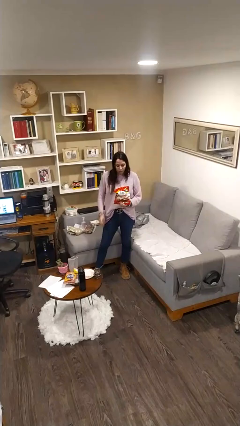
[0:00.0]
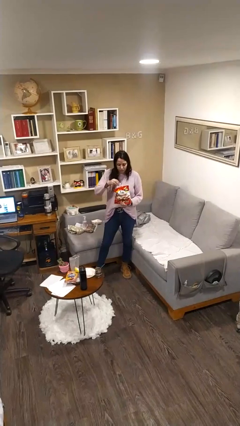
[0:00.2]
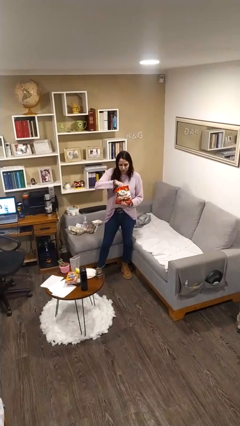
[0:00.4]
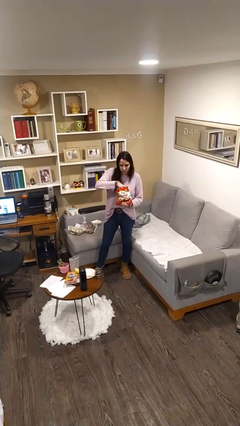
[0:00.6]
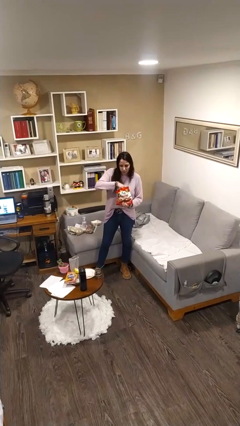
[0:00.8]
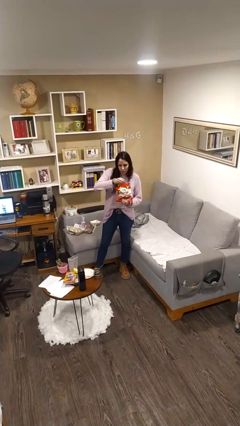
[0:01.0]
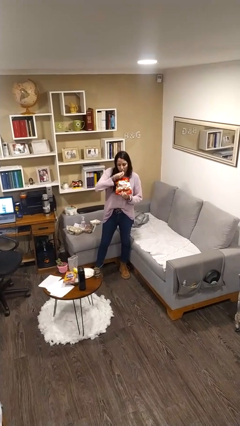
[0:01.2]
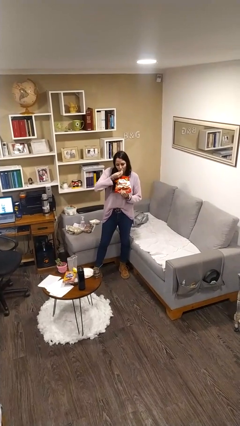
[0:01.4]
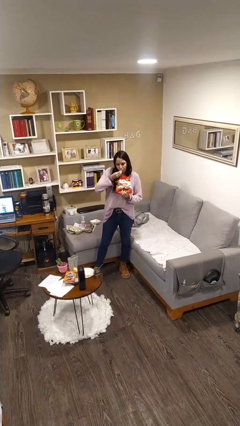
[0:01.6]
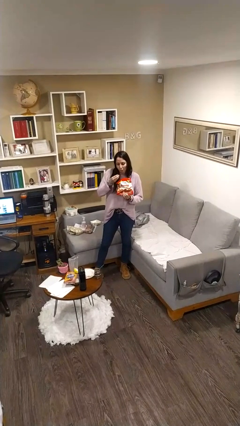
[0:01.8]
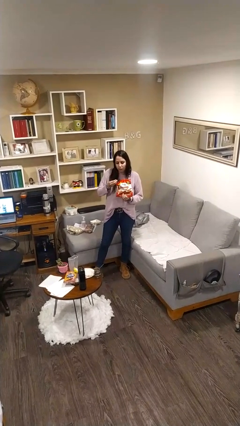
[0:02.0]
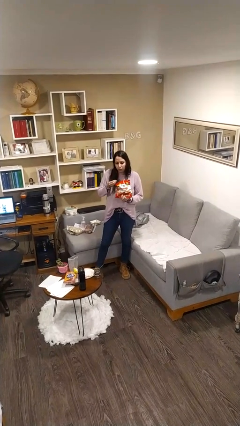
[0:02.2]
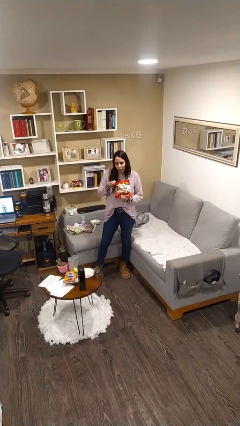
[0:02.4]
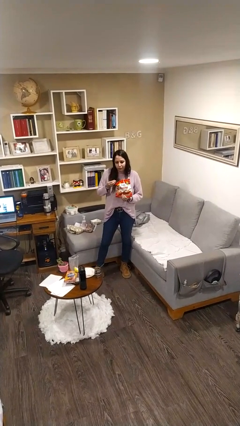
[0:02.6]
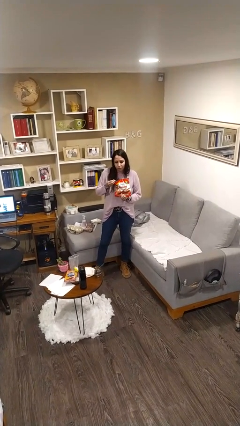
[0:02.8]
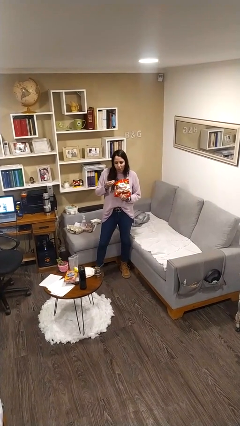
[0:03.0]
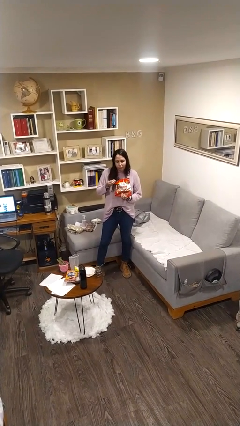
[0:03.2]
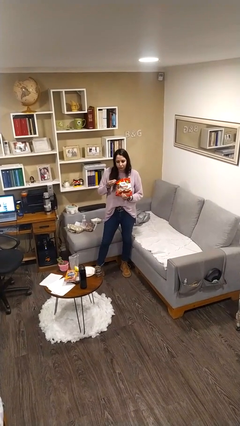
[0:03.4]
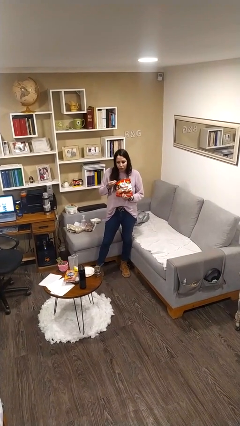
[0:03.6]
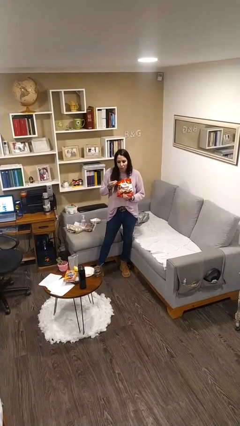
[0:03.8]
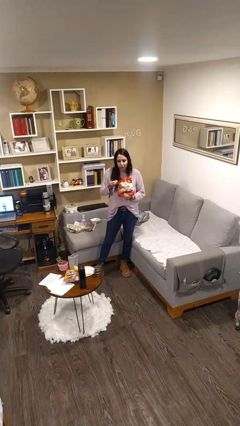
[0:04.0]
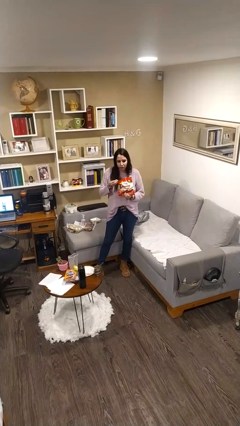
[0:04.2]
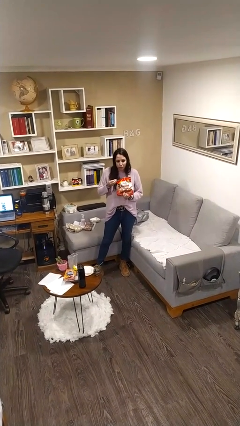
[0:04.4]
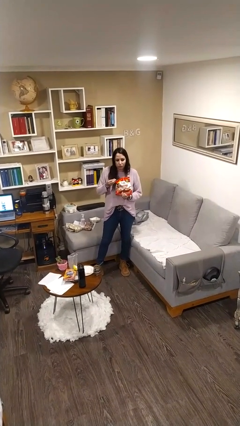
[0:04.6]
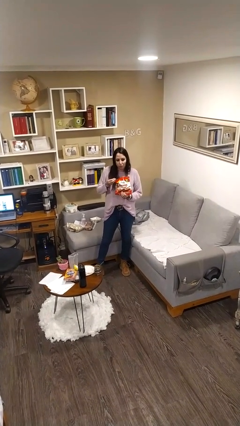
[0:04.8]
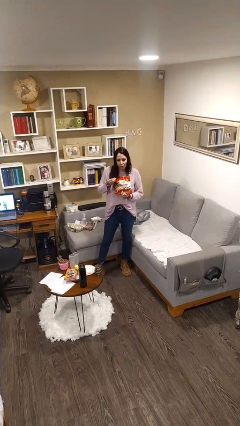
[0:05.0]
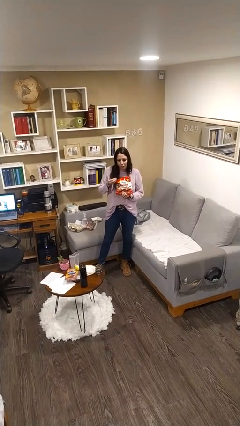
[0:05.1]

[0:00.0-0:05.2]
person eats snack from bag

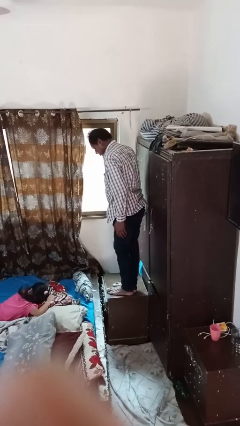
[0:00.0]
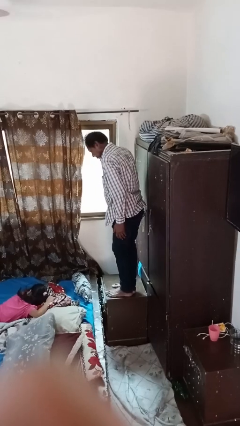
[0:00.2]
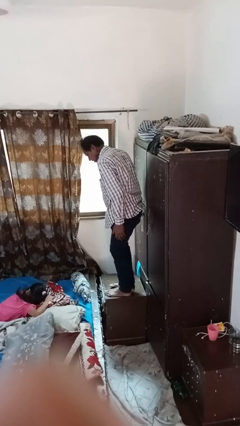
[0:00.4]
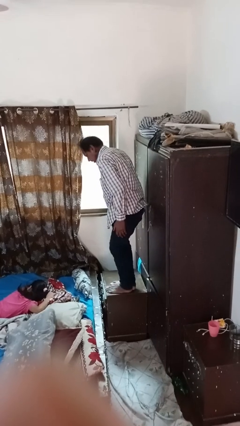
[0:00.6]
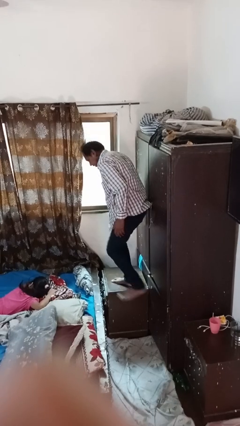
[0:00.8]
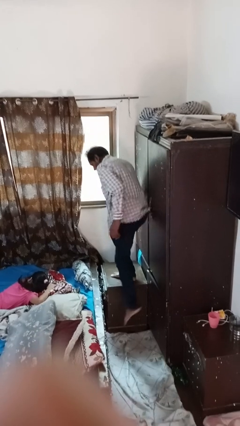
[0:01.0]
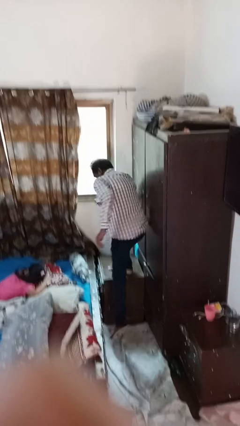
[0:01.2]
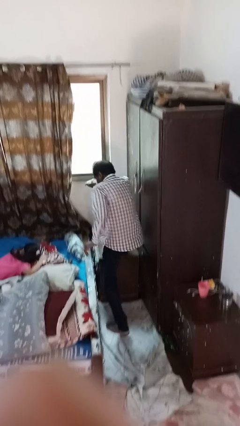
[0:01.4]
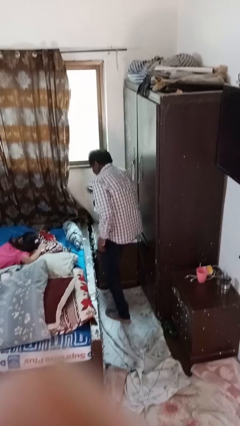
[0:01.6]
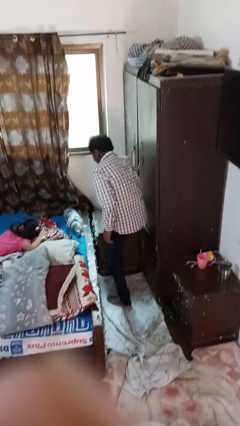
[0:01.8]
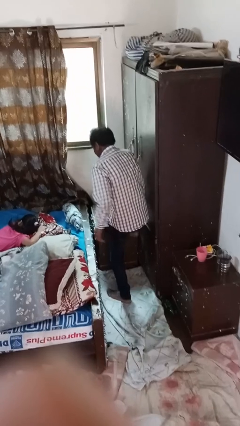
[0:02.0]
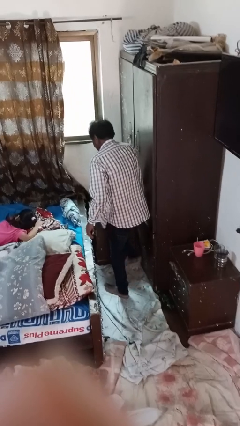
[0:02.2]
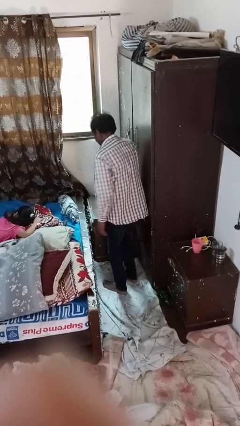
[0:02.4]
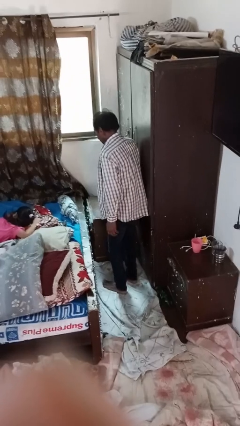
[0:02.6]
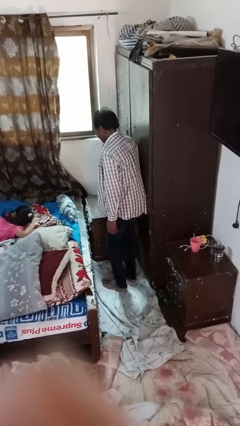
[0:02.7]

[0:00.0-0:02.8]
person climbs off table

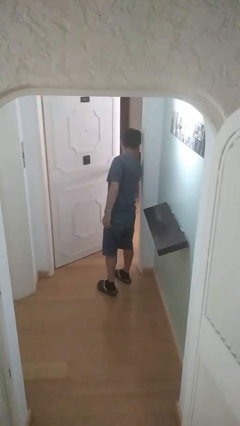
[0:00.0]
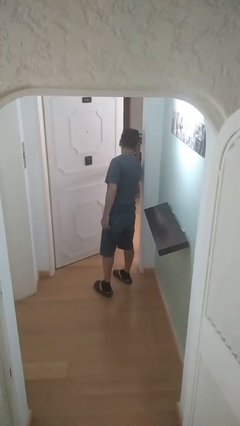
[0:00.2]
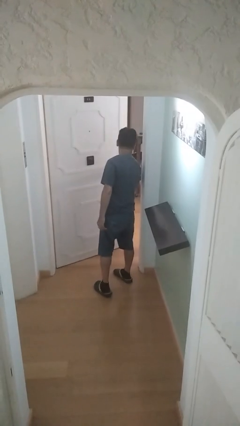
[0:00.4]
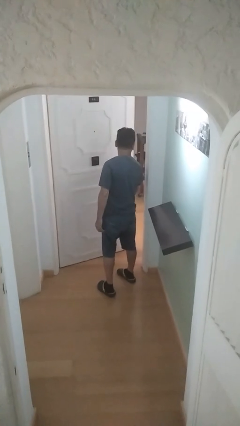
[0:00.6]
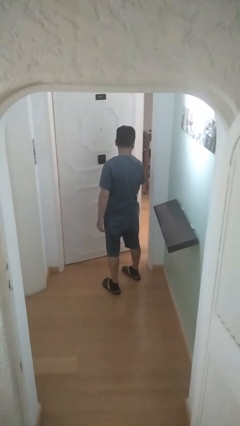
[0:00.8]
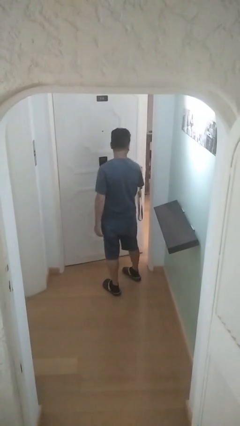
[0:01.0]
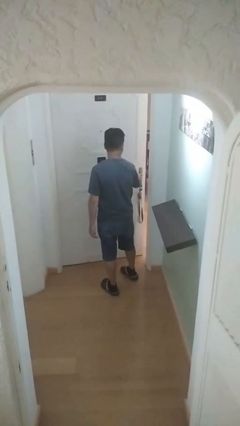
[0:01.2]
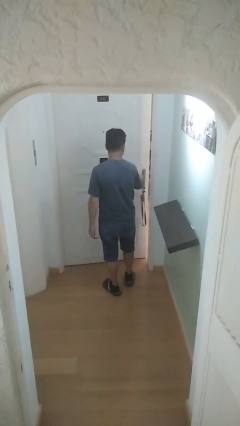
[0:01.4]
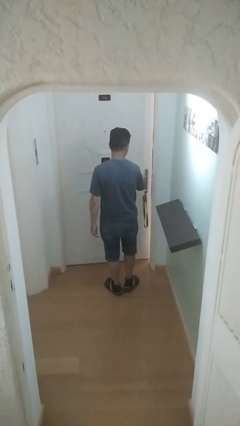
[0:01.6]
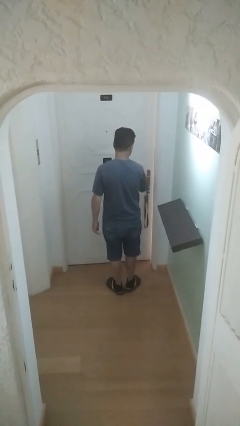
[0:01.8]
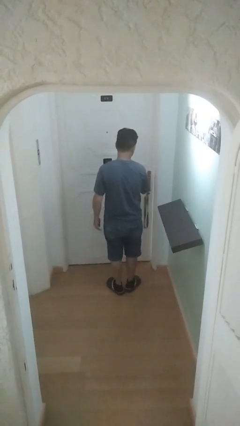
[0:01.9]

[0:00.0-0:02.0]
person closes facility door

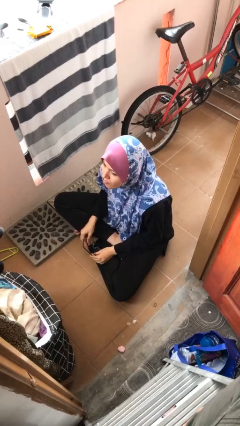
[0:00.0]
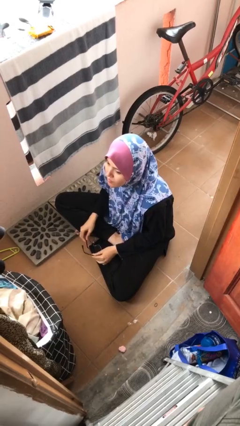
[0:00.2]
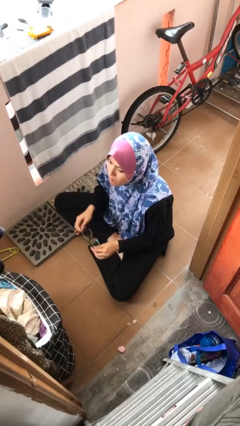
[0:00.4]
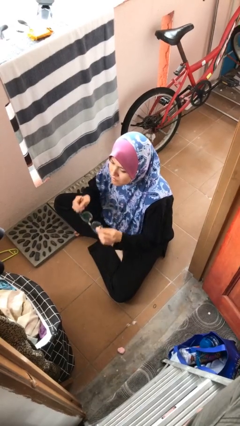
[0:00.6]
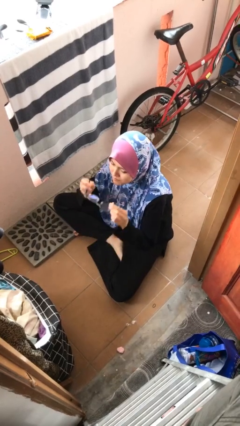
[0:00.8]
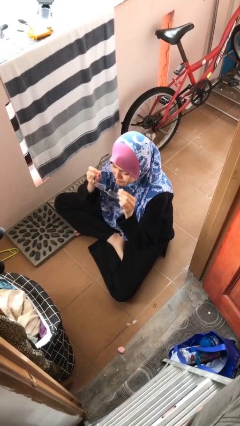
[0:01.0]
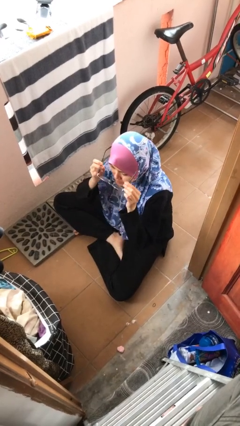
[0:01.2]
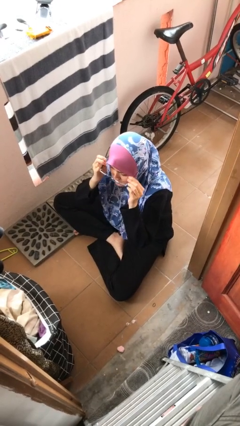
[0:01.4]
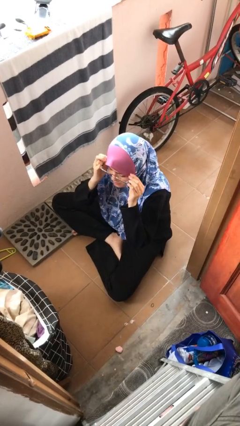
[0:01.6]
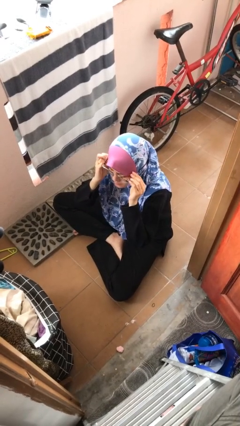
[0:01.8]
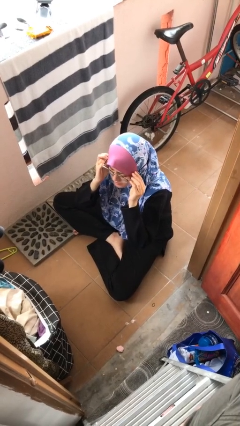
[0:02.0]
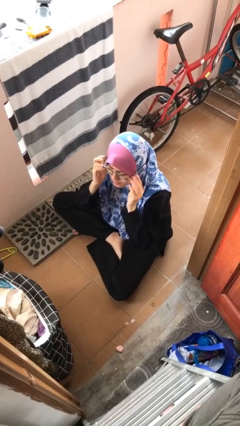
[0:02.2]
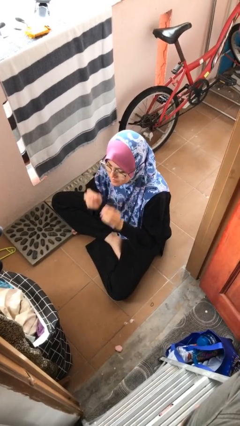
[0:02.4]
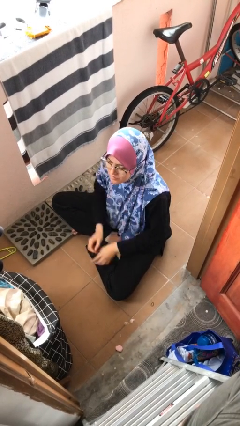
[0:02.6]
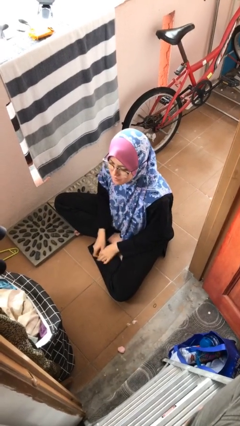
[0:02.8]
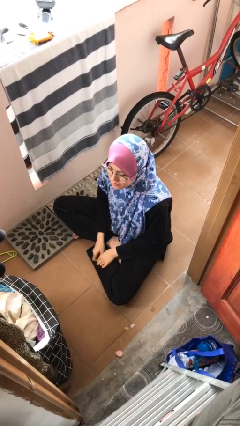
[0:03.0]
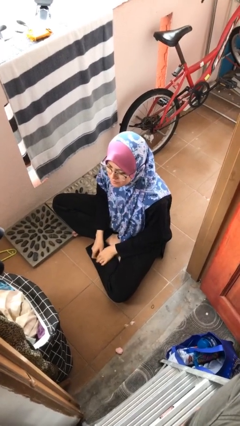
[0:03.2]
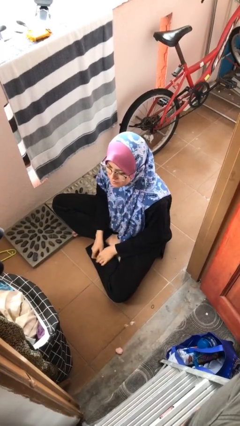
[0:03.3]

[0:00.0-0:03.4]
person puts on glasses

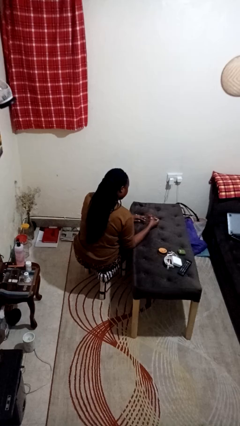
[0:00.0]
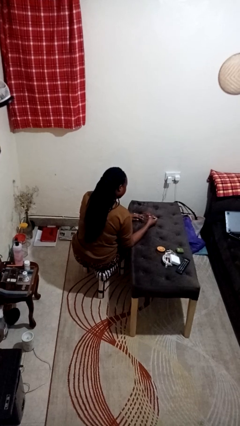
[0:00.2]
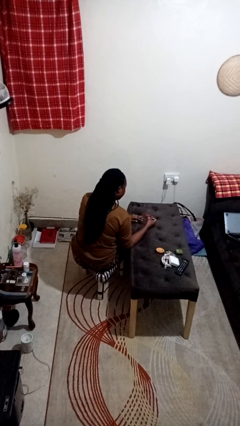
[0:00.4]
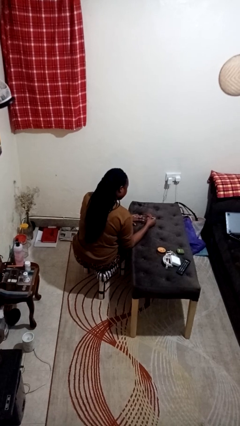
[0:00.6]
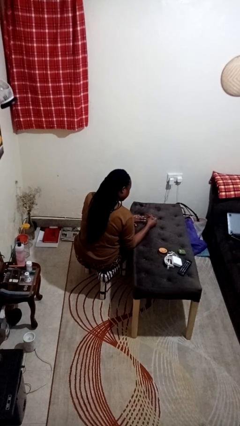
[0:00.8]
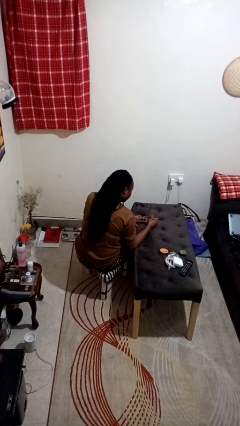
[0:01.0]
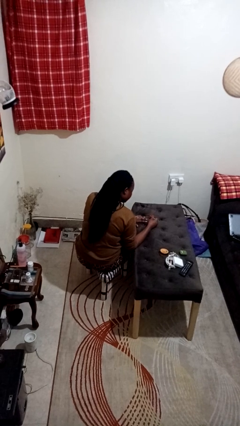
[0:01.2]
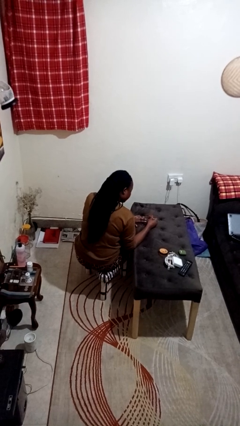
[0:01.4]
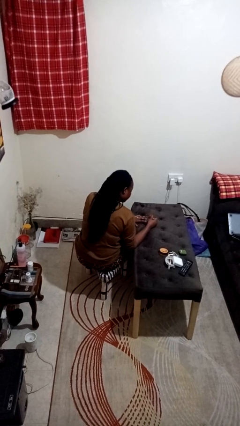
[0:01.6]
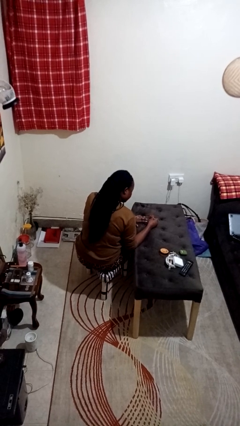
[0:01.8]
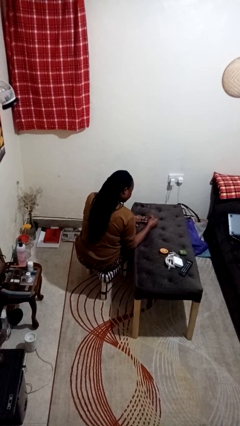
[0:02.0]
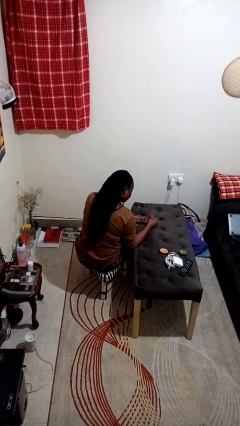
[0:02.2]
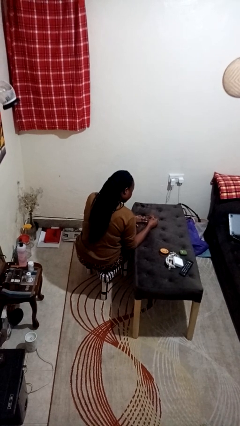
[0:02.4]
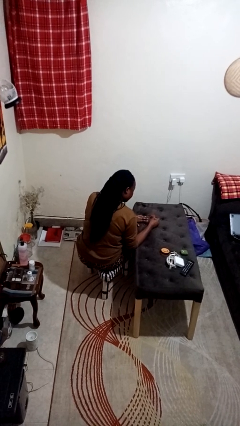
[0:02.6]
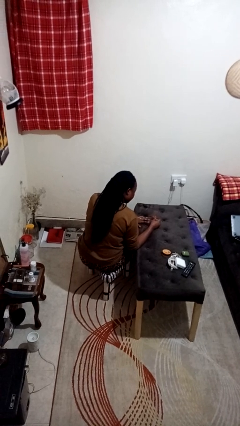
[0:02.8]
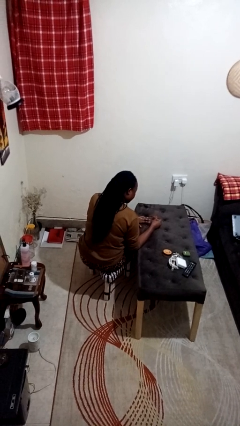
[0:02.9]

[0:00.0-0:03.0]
person paints fingernails

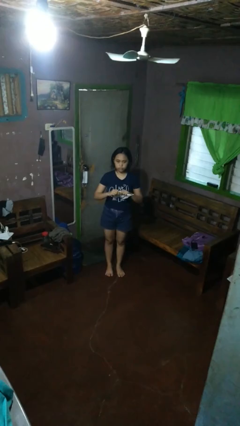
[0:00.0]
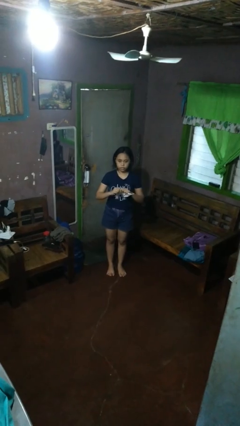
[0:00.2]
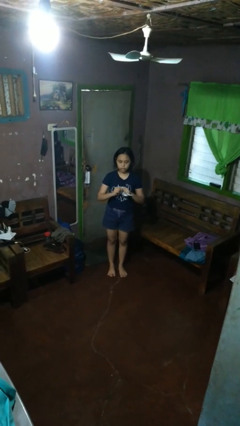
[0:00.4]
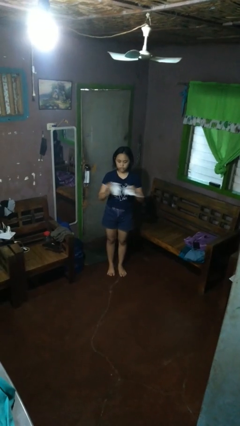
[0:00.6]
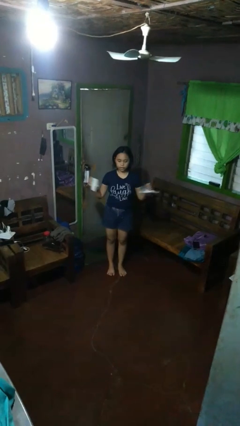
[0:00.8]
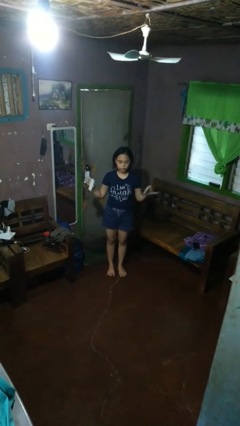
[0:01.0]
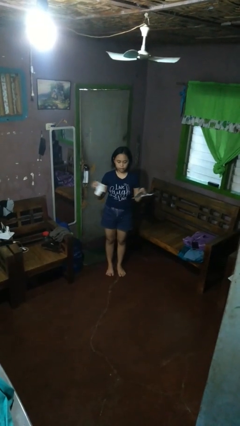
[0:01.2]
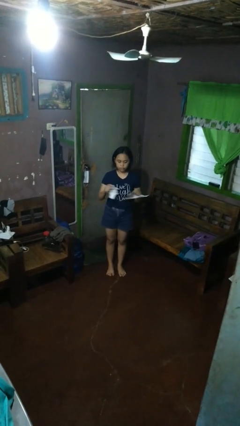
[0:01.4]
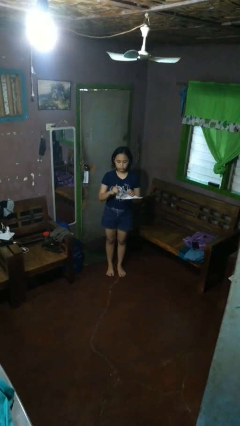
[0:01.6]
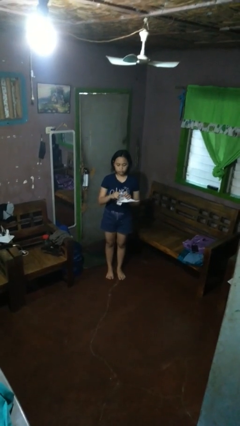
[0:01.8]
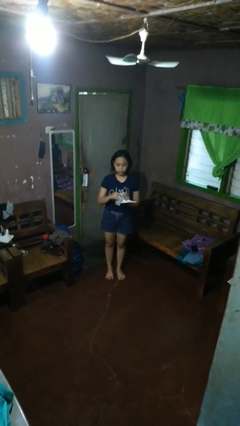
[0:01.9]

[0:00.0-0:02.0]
person tears paper
